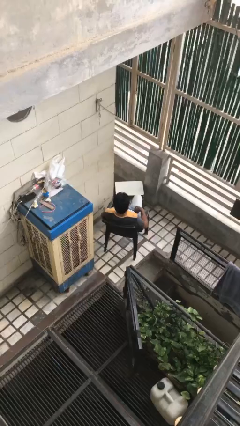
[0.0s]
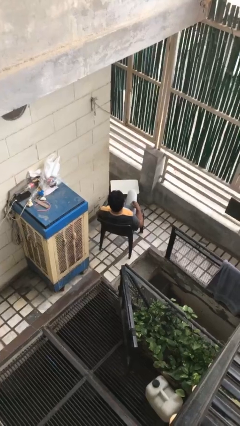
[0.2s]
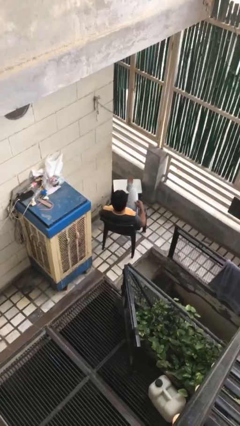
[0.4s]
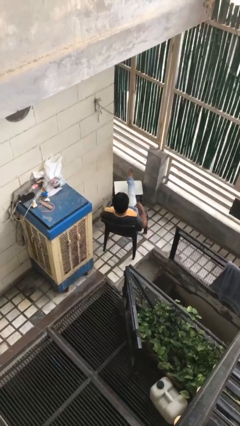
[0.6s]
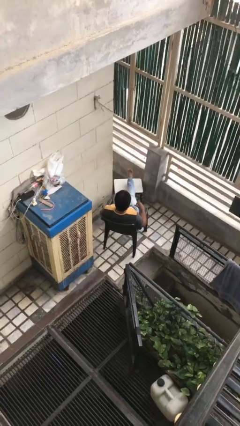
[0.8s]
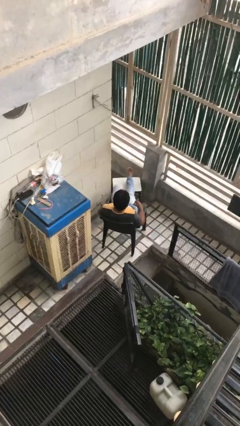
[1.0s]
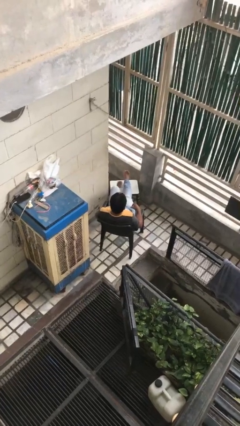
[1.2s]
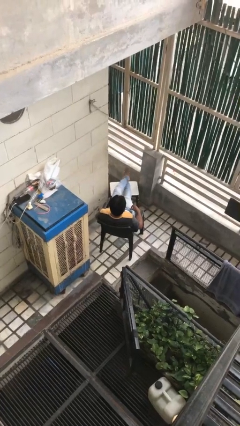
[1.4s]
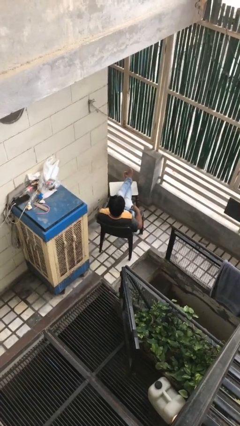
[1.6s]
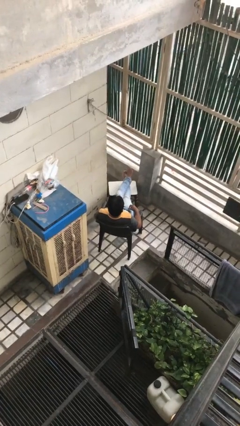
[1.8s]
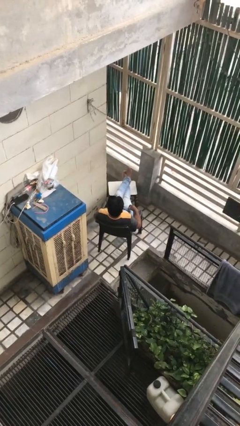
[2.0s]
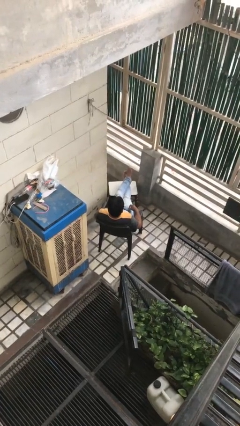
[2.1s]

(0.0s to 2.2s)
person puts feet up

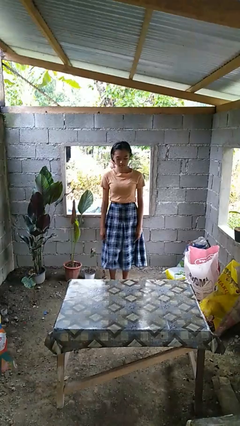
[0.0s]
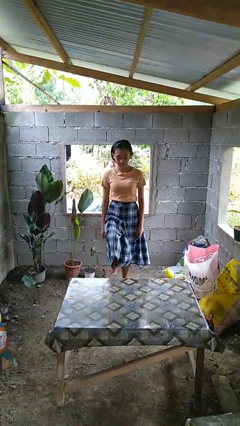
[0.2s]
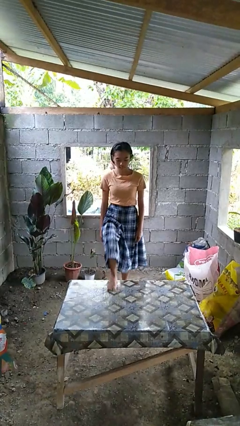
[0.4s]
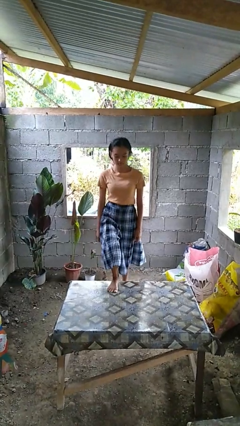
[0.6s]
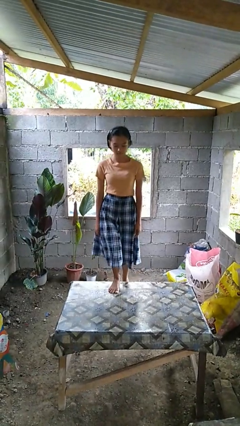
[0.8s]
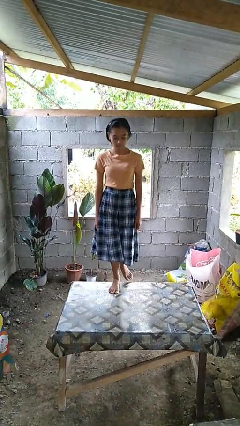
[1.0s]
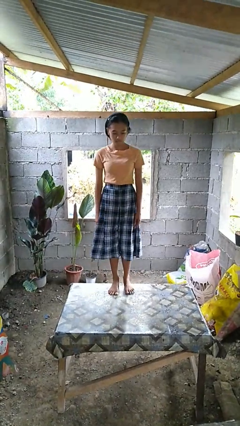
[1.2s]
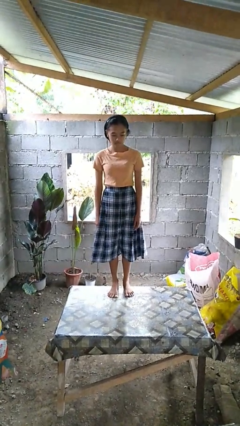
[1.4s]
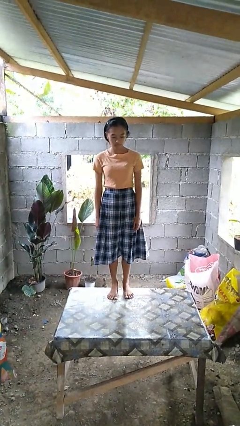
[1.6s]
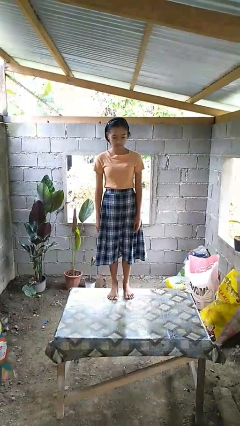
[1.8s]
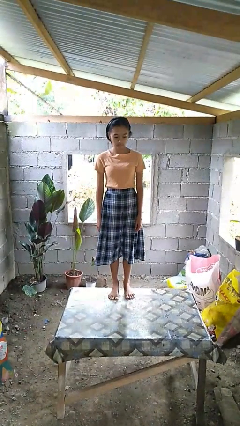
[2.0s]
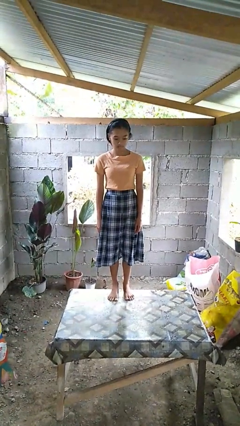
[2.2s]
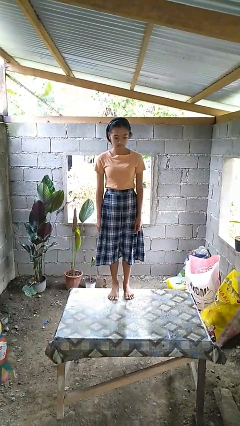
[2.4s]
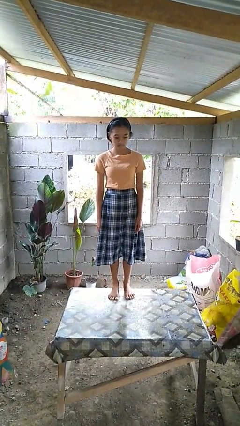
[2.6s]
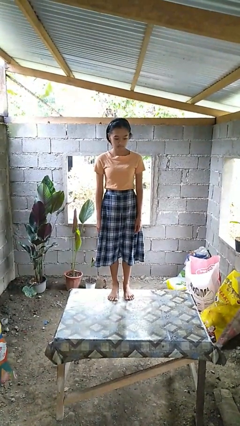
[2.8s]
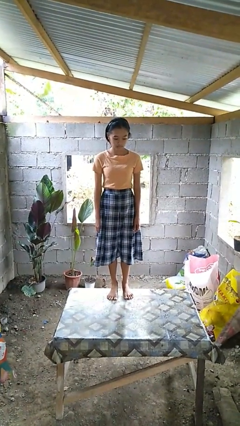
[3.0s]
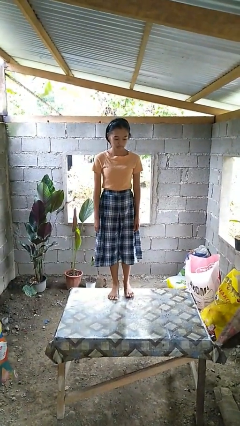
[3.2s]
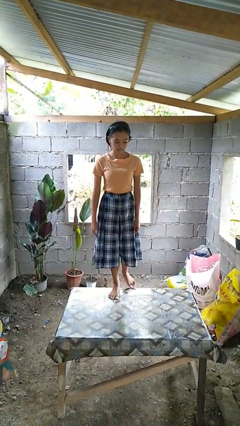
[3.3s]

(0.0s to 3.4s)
person climbs on table

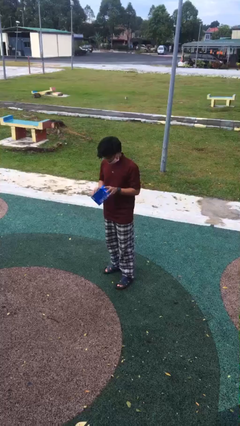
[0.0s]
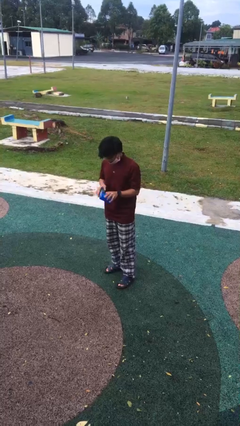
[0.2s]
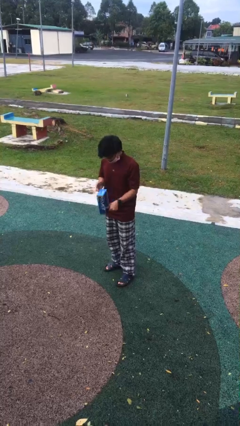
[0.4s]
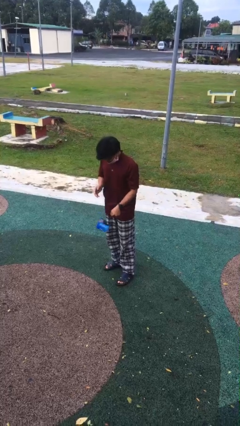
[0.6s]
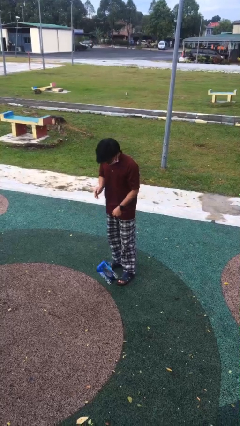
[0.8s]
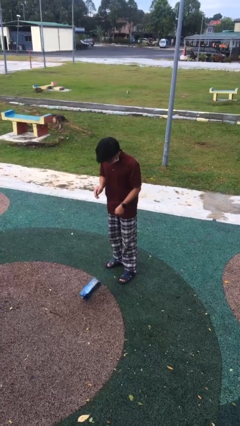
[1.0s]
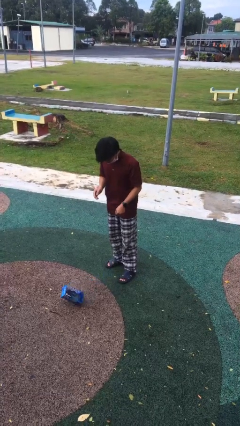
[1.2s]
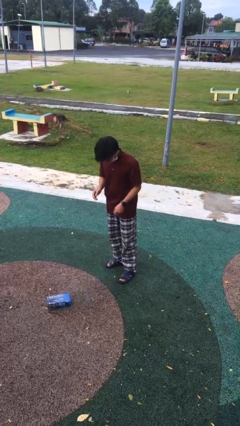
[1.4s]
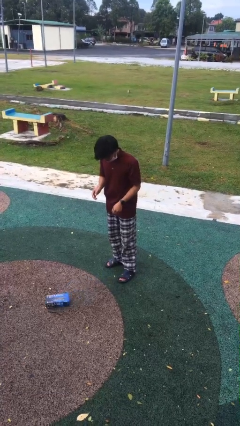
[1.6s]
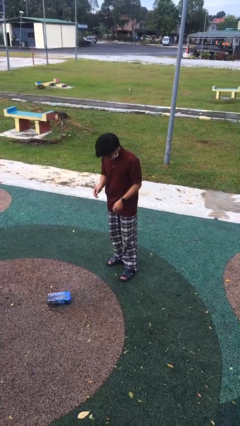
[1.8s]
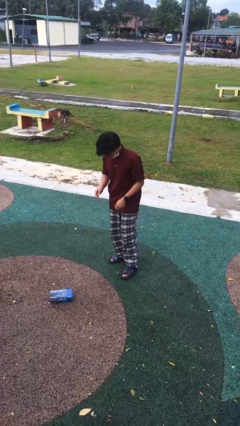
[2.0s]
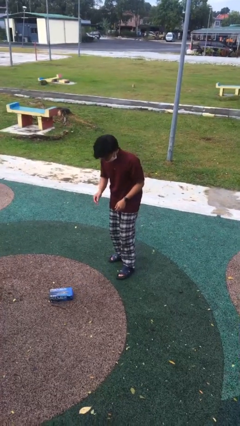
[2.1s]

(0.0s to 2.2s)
person drops object

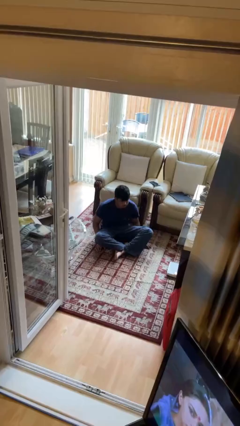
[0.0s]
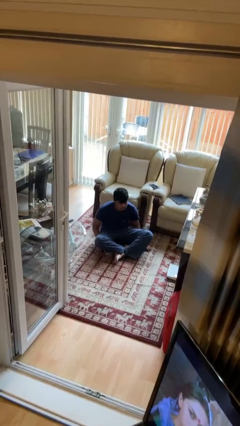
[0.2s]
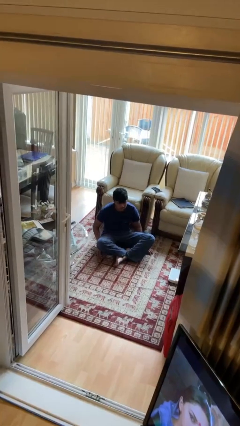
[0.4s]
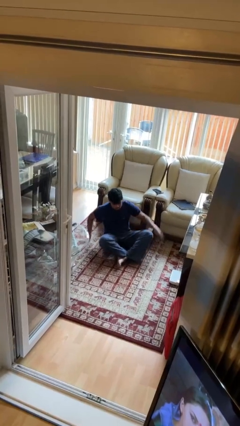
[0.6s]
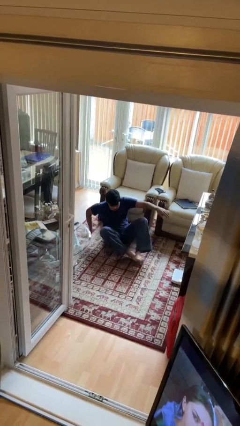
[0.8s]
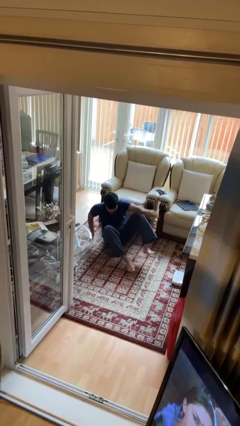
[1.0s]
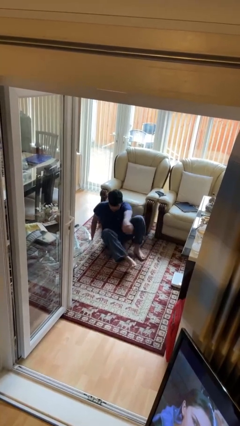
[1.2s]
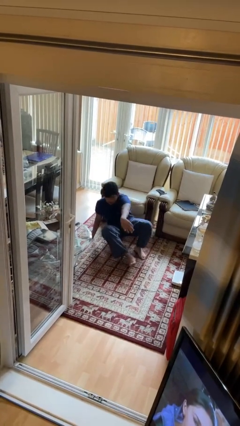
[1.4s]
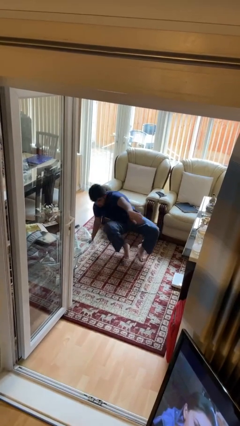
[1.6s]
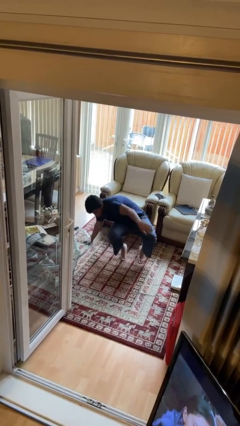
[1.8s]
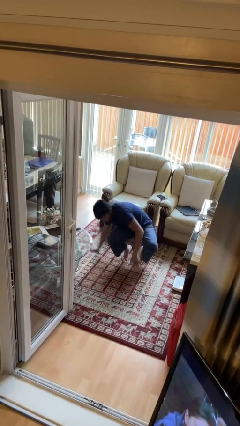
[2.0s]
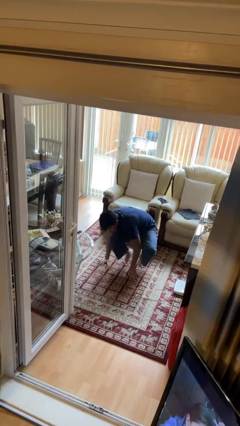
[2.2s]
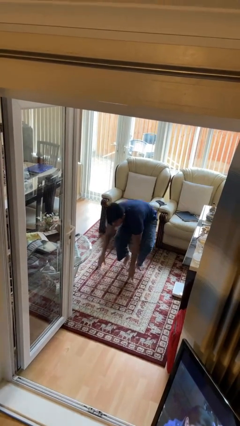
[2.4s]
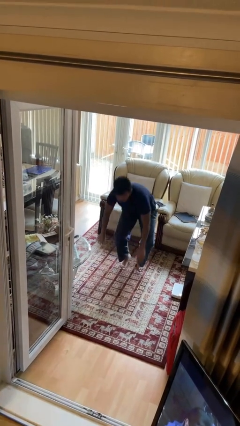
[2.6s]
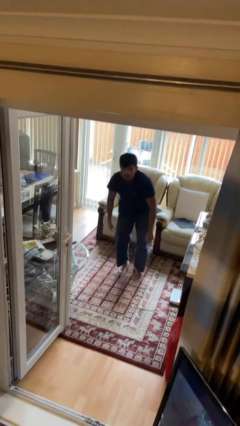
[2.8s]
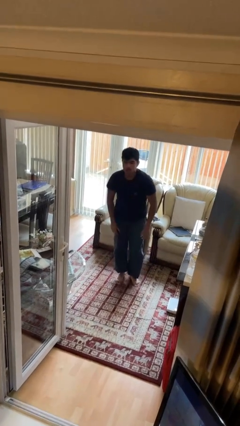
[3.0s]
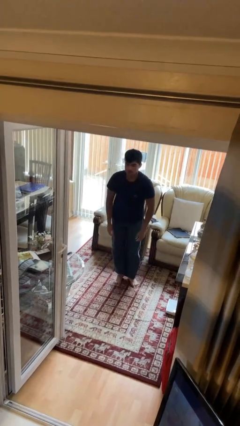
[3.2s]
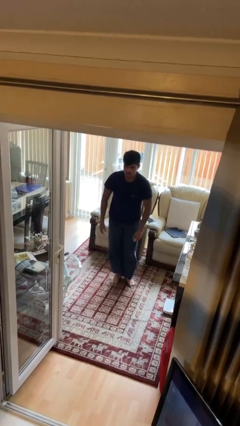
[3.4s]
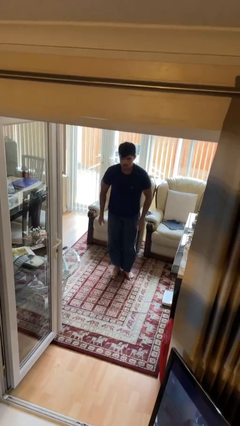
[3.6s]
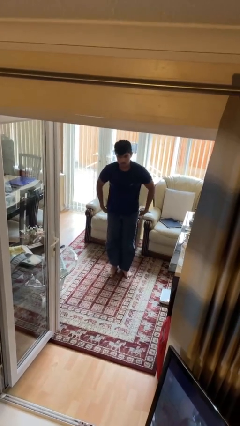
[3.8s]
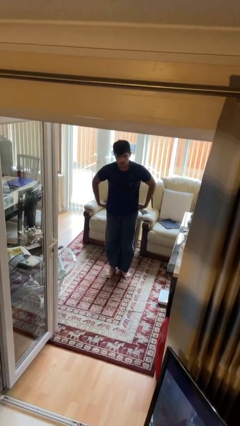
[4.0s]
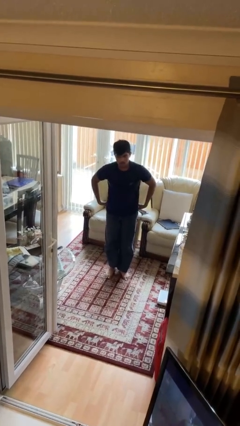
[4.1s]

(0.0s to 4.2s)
person stands up from floor

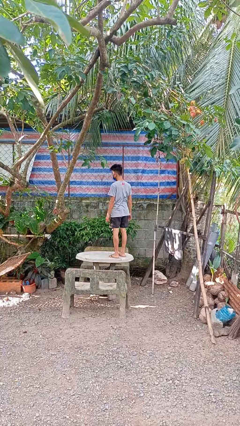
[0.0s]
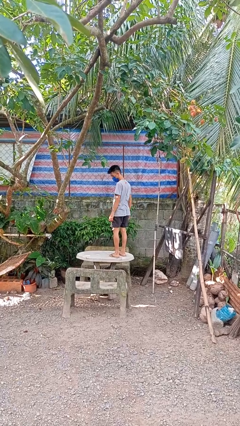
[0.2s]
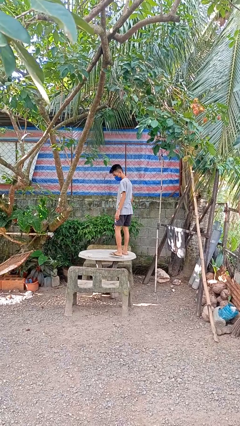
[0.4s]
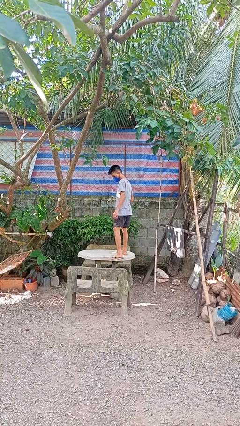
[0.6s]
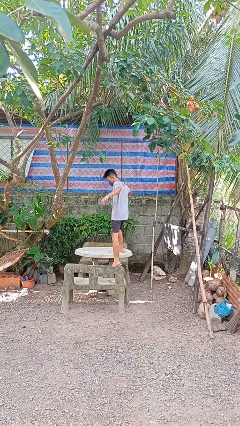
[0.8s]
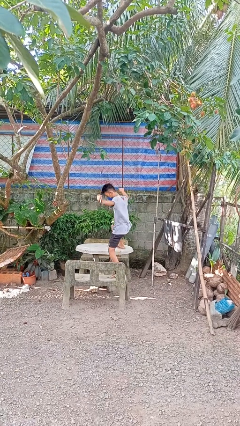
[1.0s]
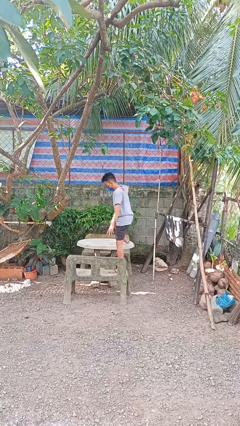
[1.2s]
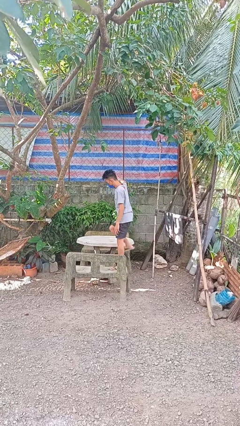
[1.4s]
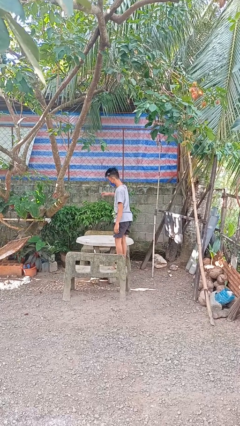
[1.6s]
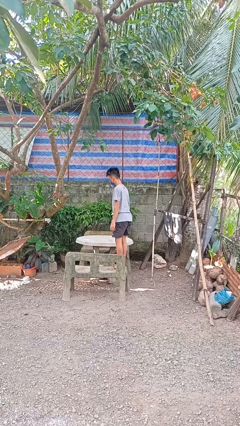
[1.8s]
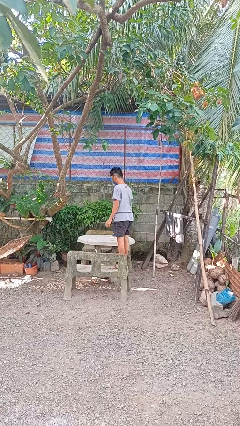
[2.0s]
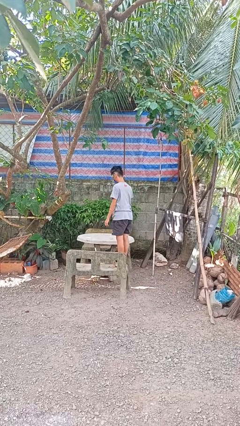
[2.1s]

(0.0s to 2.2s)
person climbs off table

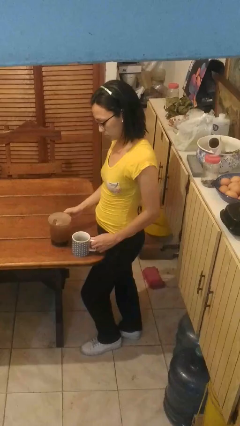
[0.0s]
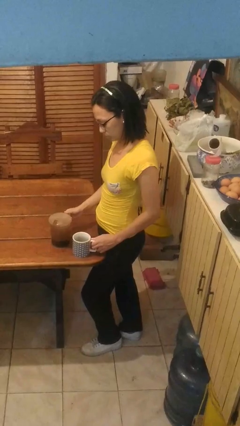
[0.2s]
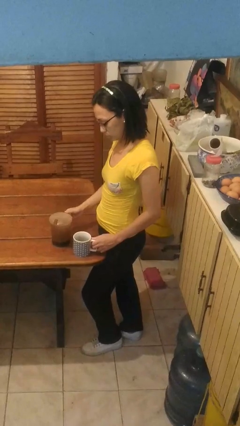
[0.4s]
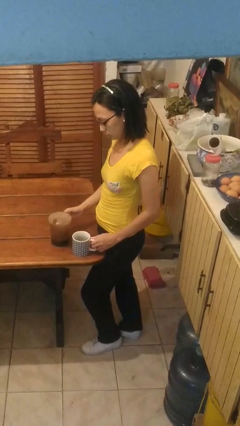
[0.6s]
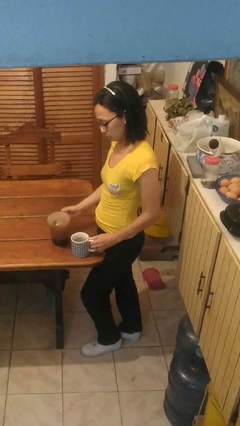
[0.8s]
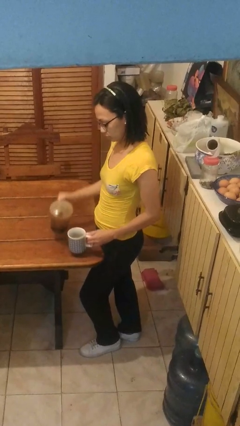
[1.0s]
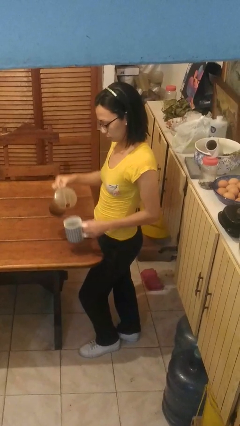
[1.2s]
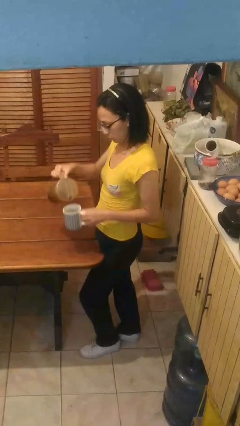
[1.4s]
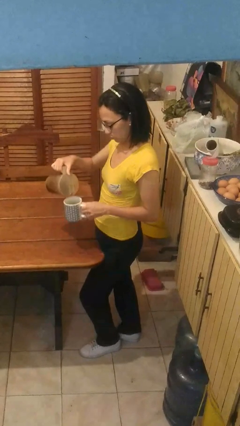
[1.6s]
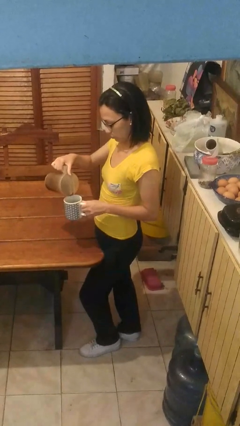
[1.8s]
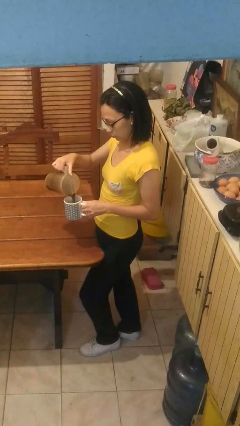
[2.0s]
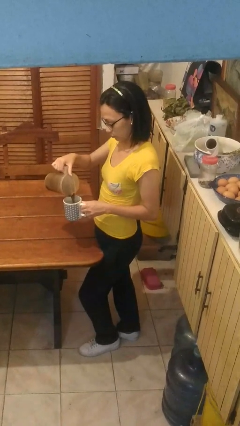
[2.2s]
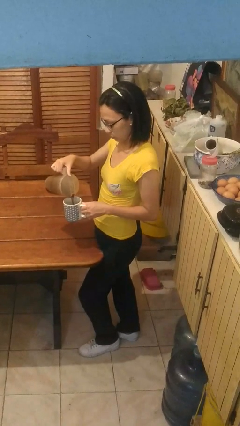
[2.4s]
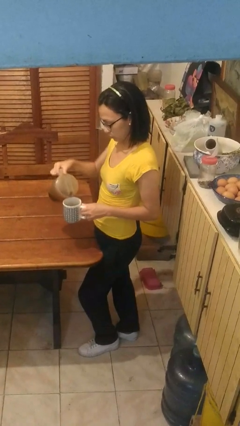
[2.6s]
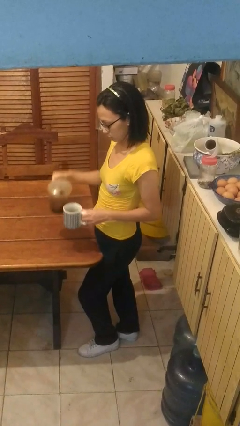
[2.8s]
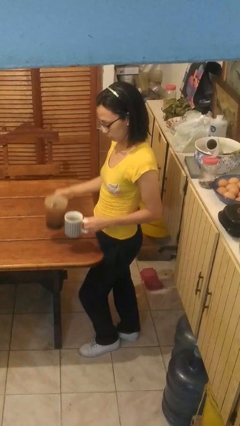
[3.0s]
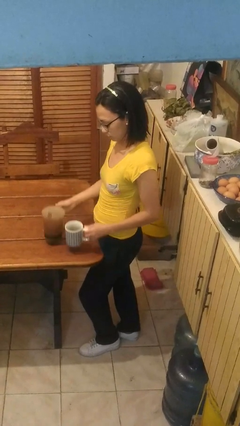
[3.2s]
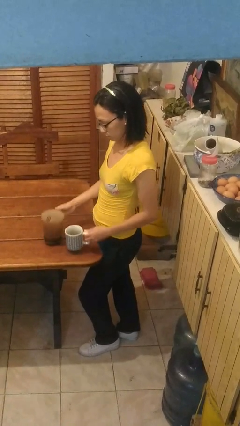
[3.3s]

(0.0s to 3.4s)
person pours coffee into mug
